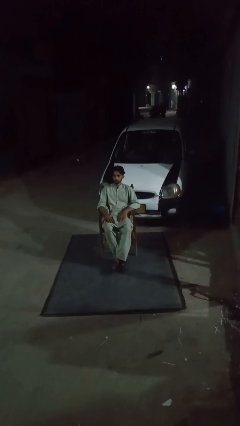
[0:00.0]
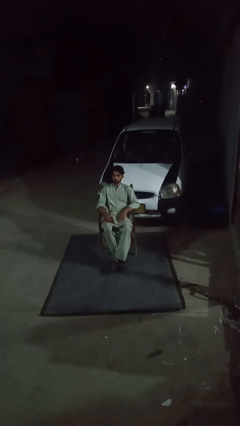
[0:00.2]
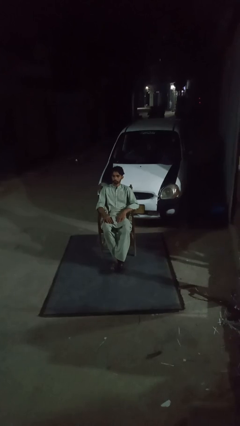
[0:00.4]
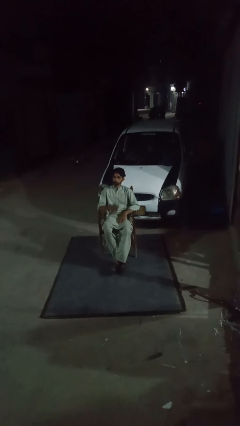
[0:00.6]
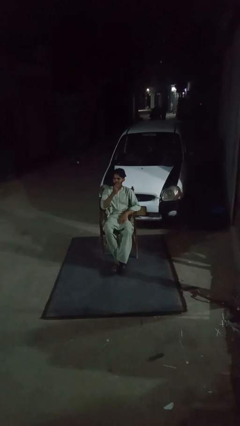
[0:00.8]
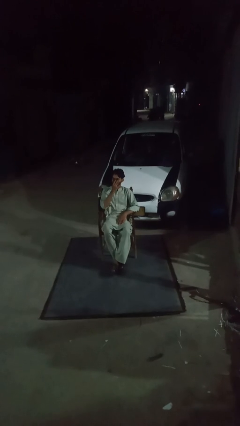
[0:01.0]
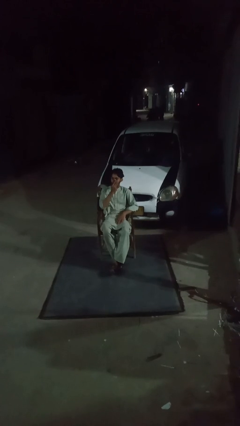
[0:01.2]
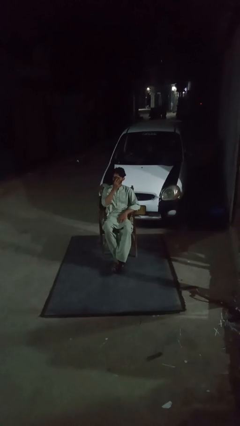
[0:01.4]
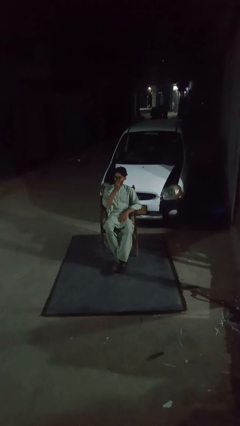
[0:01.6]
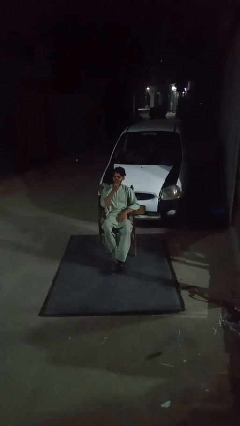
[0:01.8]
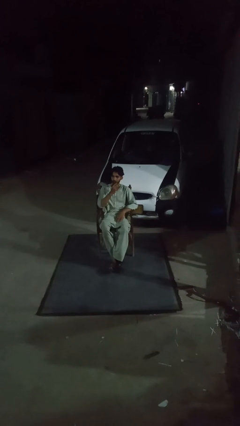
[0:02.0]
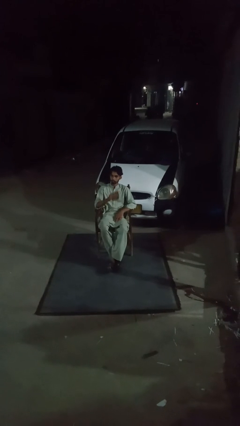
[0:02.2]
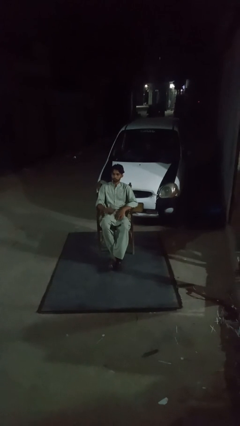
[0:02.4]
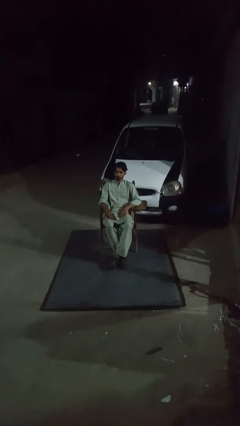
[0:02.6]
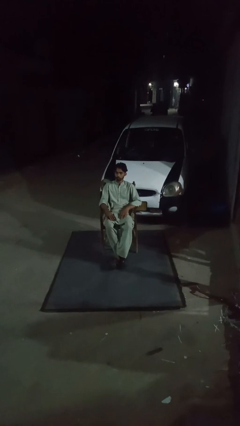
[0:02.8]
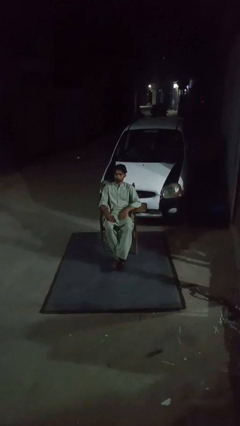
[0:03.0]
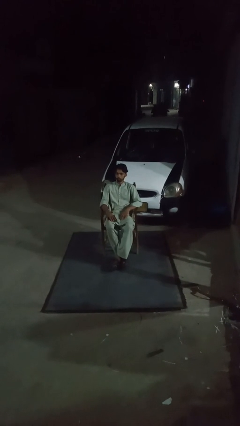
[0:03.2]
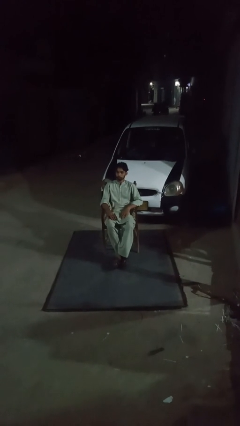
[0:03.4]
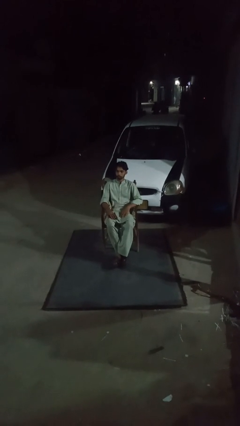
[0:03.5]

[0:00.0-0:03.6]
person wipes mouth with napkin

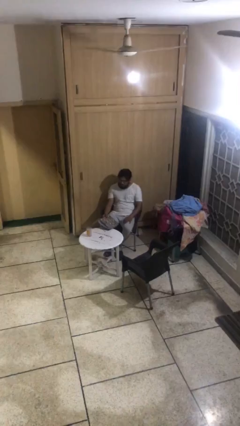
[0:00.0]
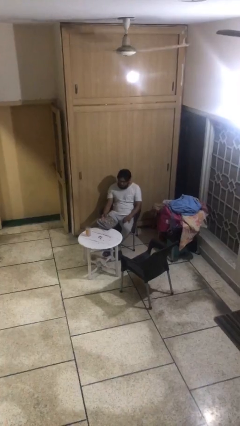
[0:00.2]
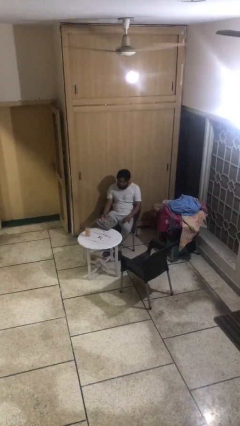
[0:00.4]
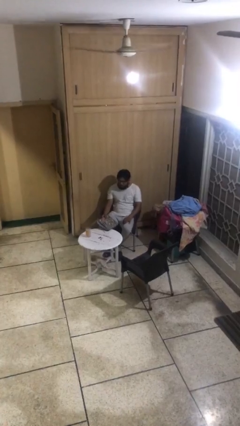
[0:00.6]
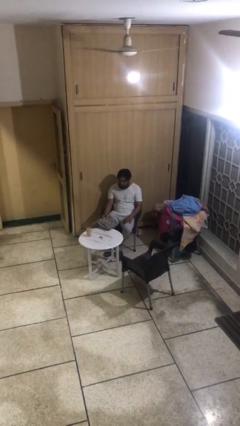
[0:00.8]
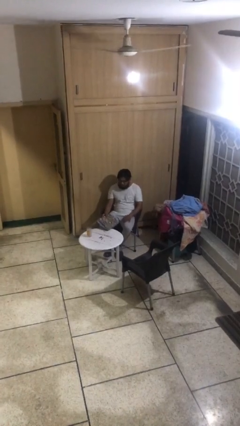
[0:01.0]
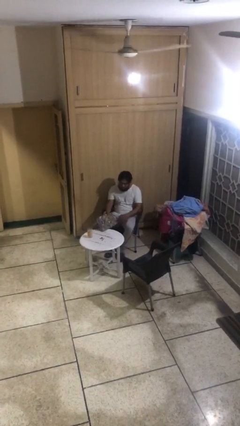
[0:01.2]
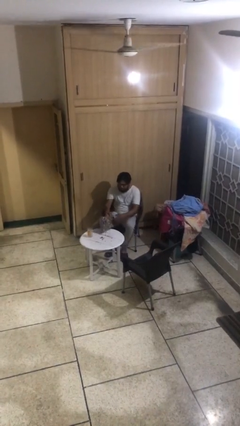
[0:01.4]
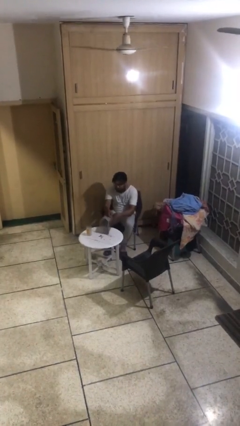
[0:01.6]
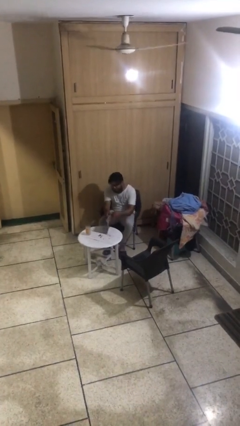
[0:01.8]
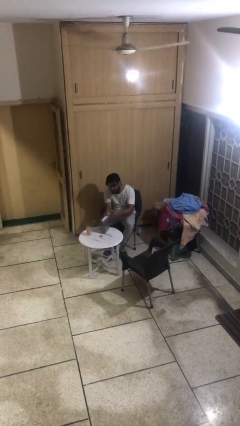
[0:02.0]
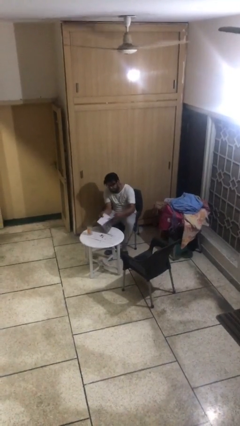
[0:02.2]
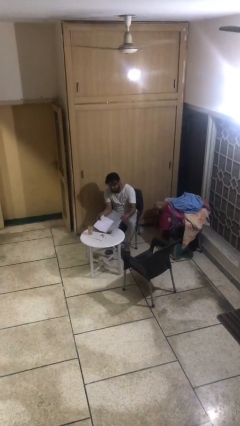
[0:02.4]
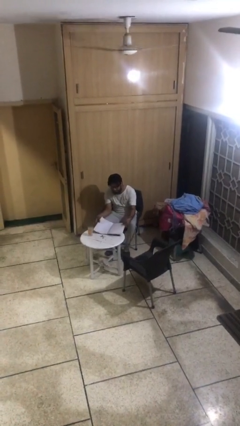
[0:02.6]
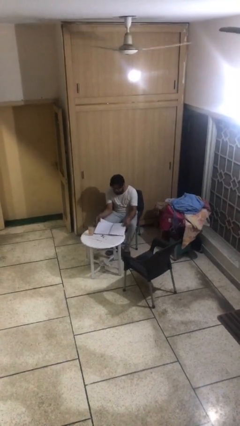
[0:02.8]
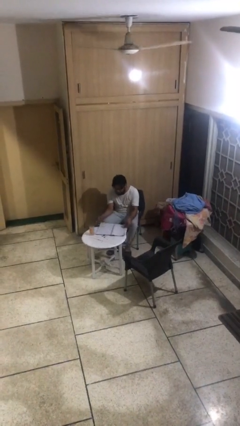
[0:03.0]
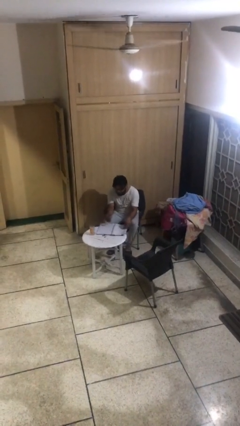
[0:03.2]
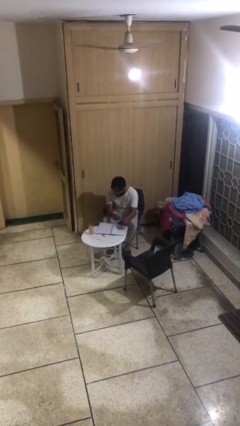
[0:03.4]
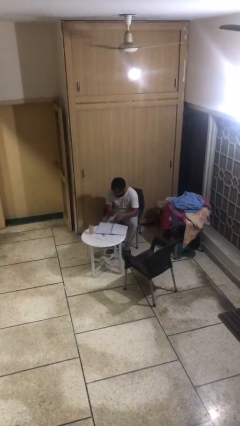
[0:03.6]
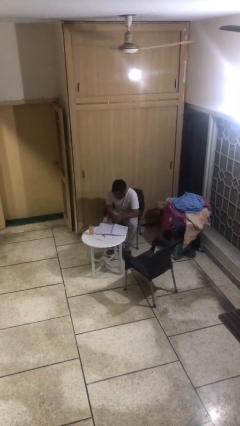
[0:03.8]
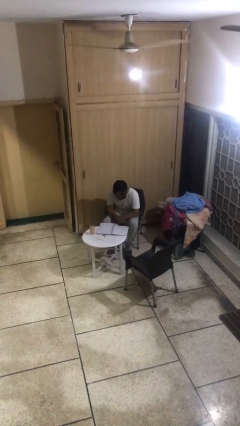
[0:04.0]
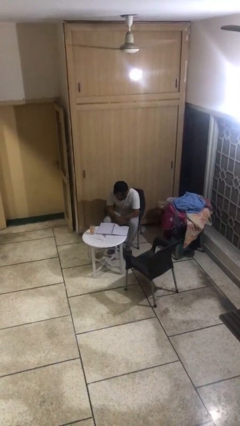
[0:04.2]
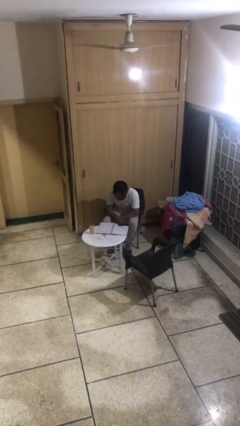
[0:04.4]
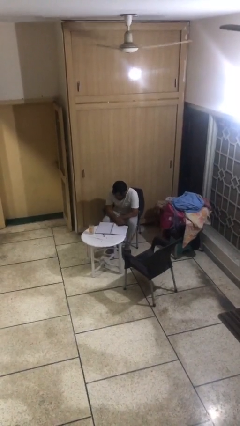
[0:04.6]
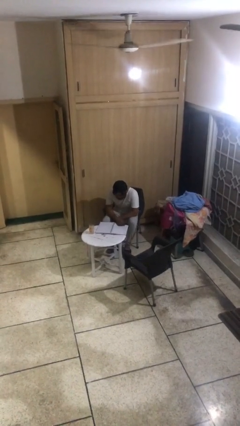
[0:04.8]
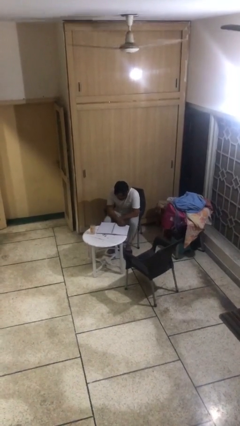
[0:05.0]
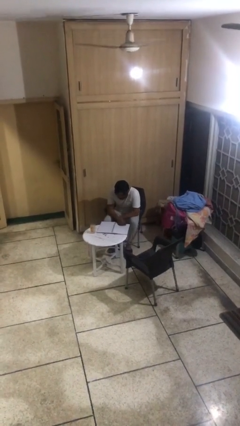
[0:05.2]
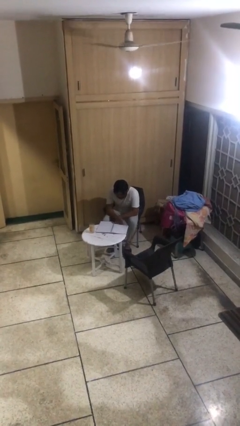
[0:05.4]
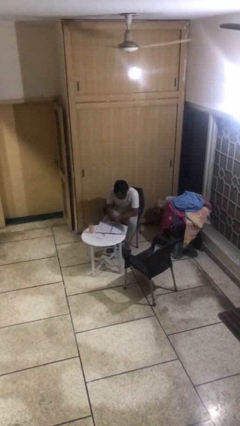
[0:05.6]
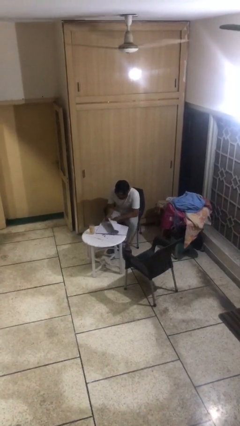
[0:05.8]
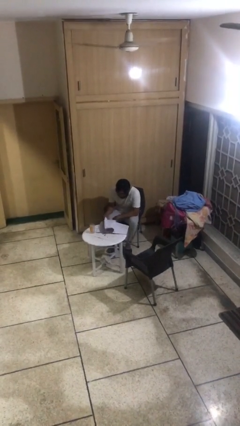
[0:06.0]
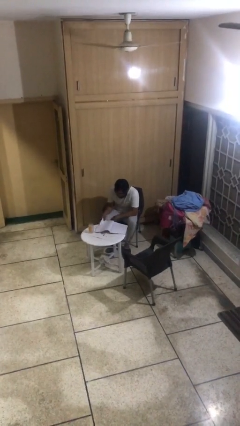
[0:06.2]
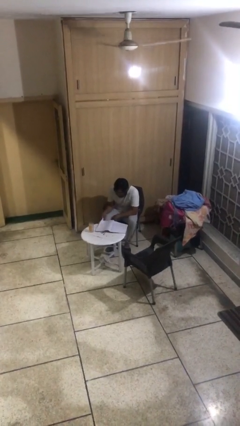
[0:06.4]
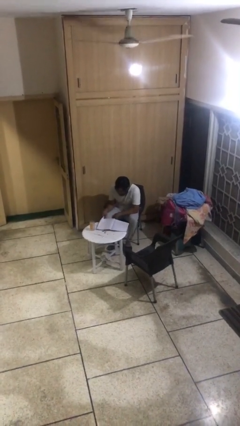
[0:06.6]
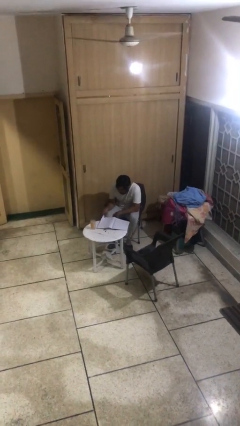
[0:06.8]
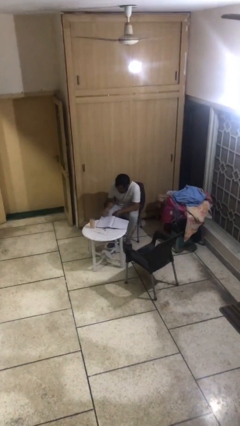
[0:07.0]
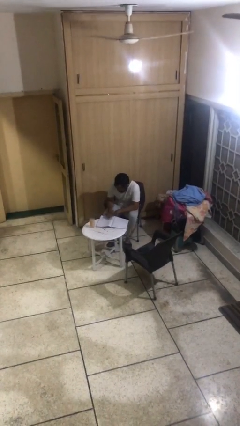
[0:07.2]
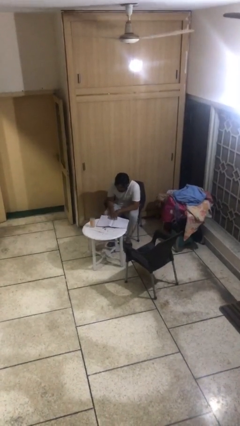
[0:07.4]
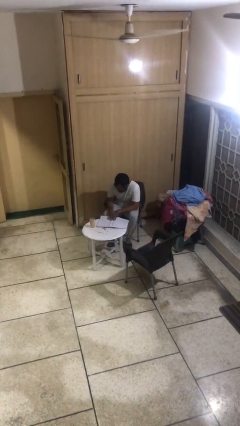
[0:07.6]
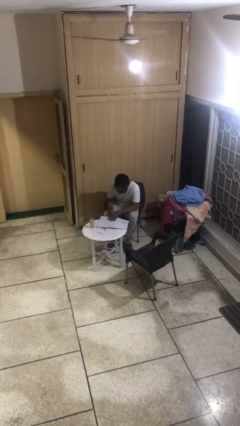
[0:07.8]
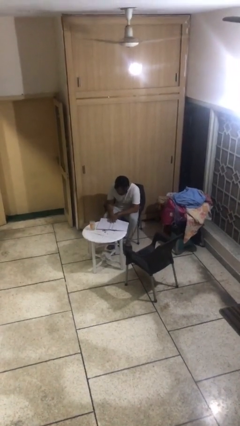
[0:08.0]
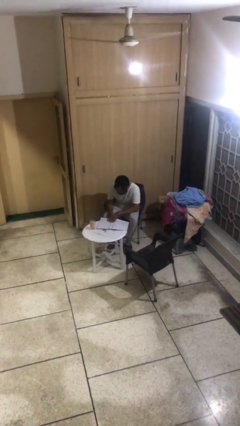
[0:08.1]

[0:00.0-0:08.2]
person reads document

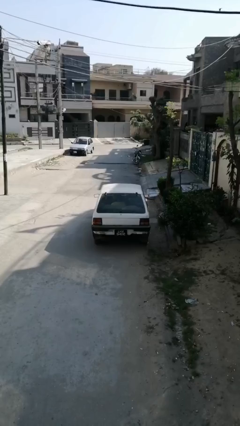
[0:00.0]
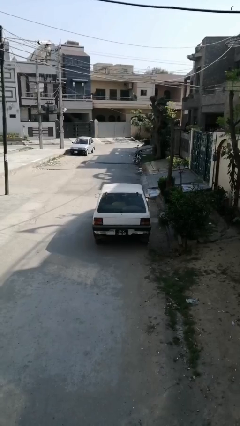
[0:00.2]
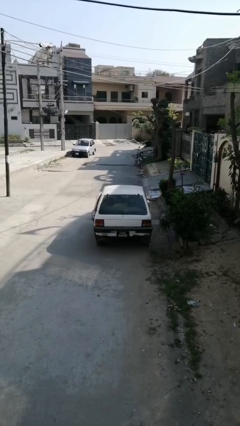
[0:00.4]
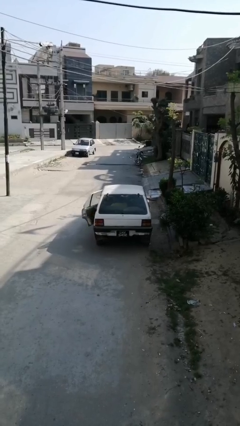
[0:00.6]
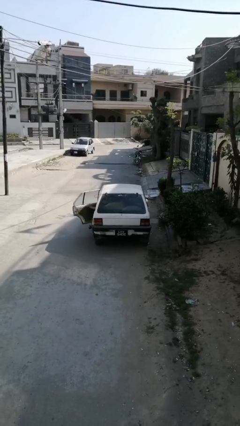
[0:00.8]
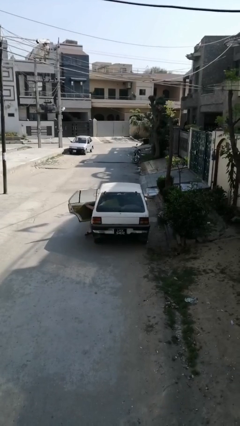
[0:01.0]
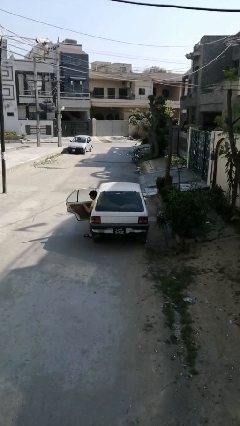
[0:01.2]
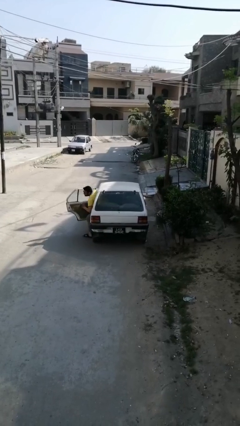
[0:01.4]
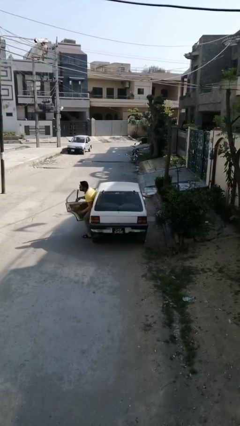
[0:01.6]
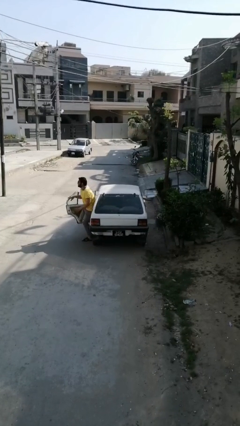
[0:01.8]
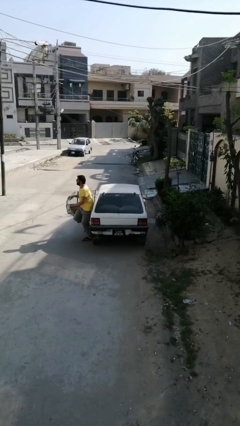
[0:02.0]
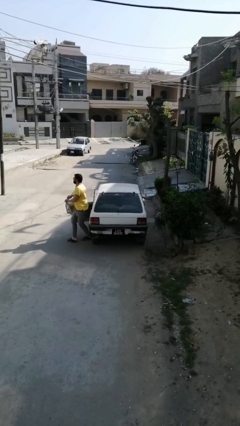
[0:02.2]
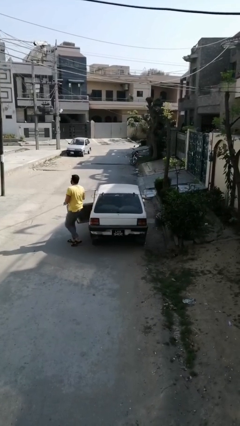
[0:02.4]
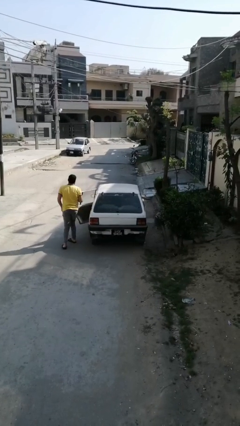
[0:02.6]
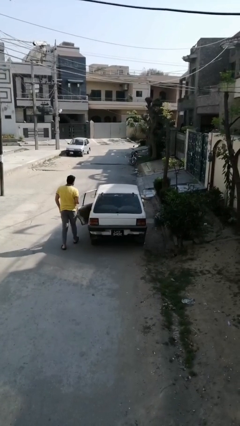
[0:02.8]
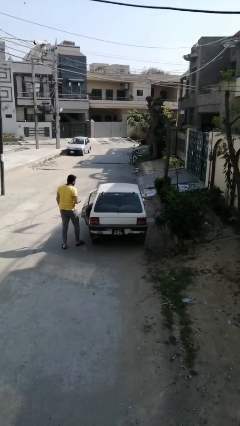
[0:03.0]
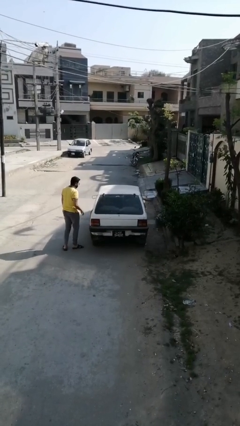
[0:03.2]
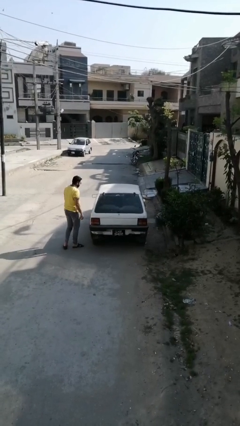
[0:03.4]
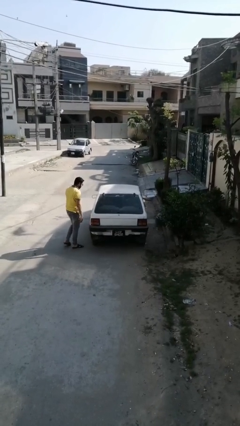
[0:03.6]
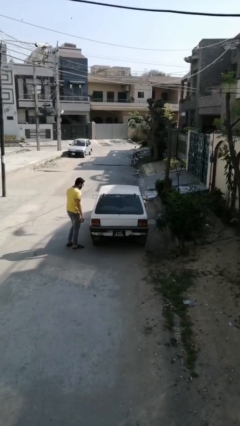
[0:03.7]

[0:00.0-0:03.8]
car drops off person

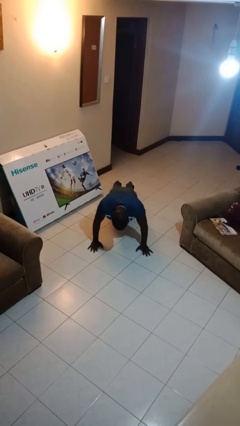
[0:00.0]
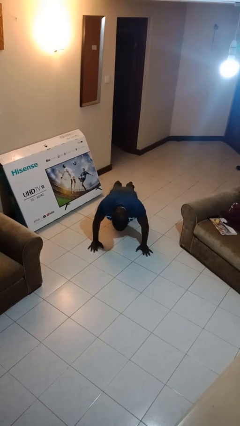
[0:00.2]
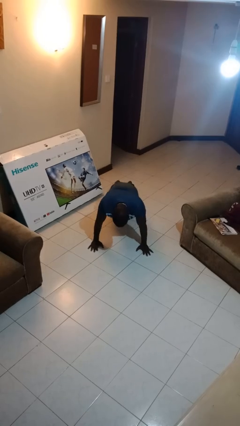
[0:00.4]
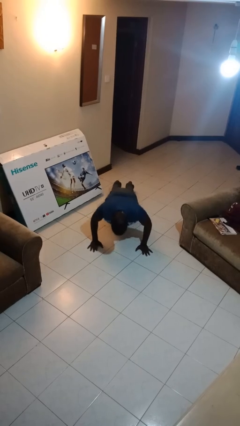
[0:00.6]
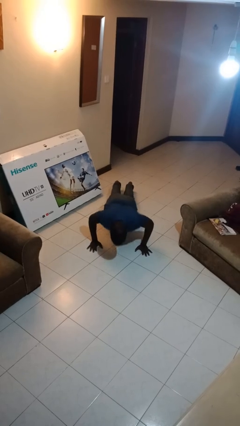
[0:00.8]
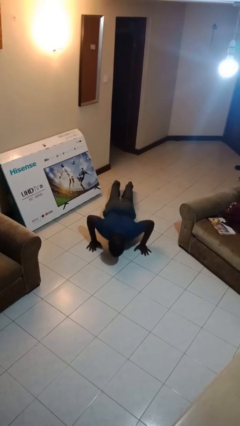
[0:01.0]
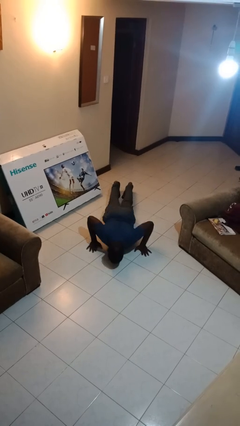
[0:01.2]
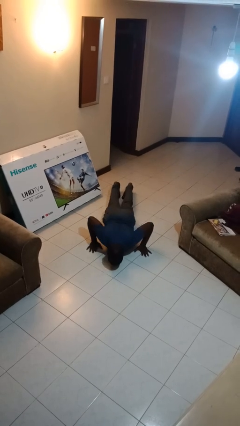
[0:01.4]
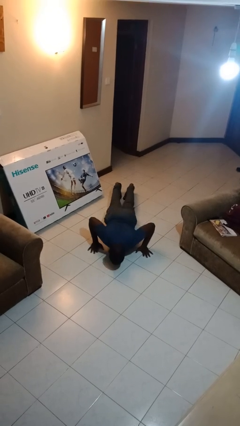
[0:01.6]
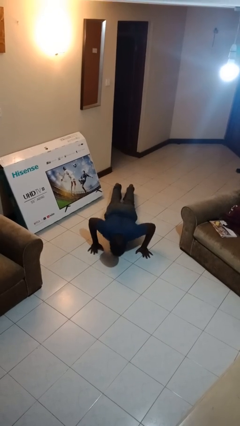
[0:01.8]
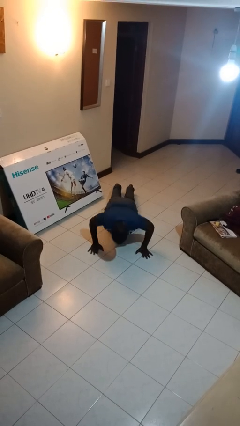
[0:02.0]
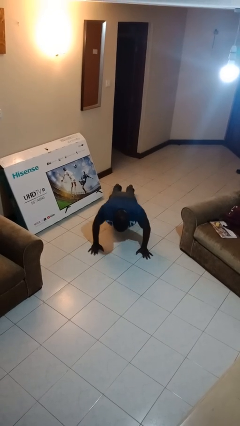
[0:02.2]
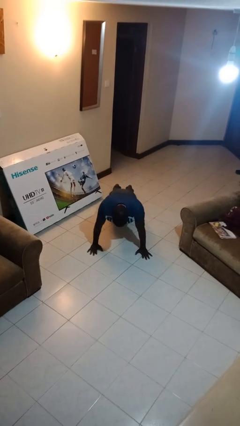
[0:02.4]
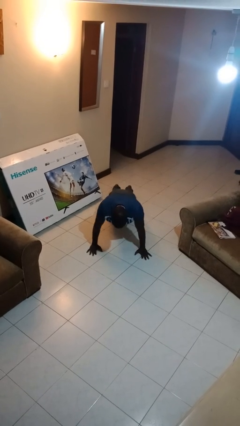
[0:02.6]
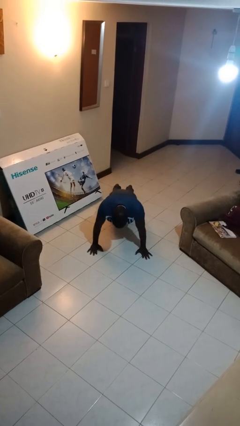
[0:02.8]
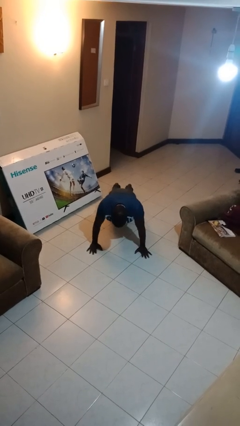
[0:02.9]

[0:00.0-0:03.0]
person exercises with pushup
